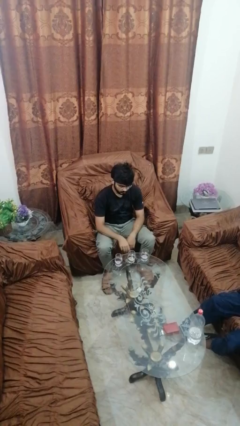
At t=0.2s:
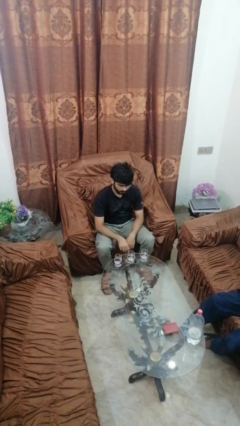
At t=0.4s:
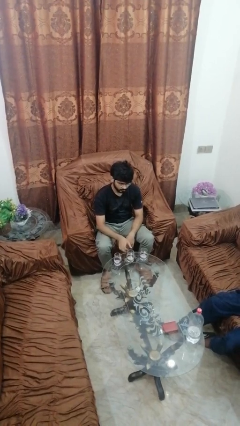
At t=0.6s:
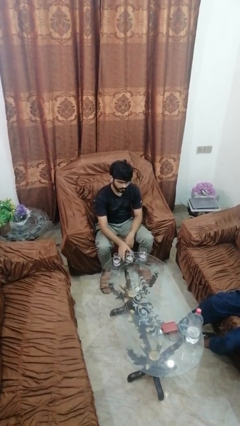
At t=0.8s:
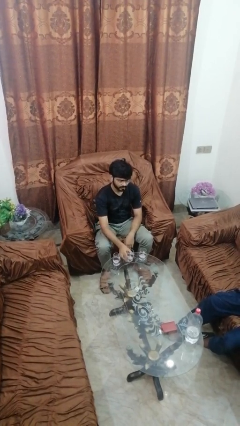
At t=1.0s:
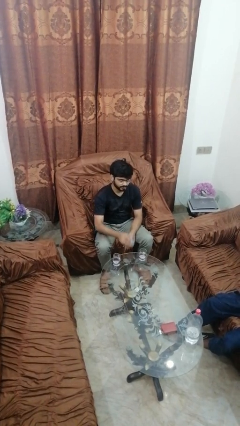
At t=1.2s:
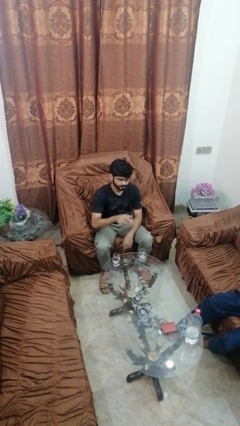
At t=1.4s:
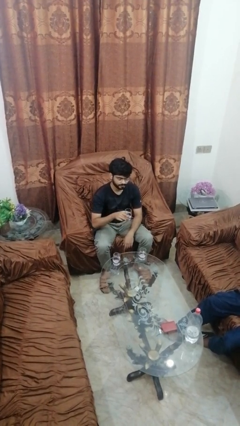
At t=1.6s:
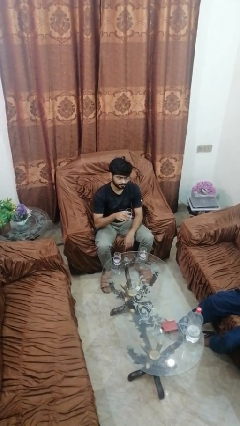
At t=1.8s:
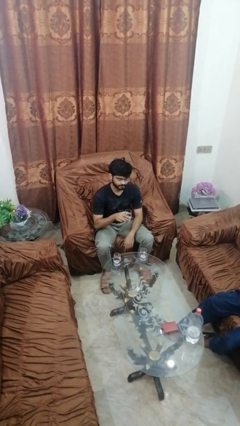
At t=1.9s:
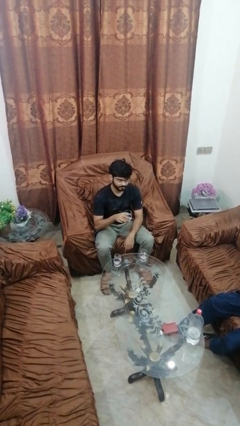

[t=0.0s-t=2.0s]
person picks up object from table

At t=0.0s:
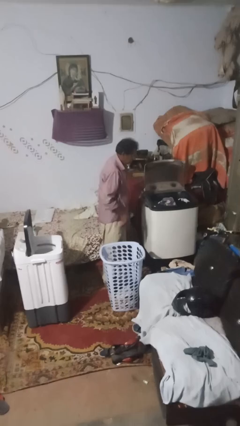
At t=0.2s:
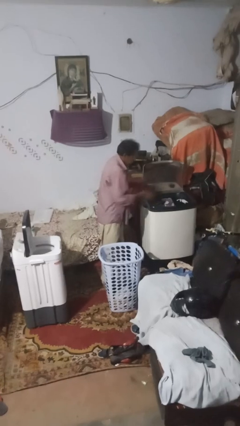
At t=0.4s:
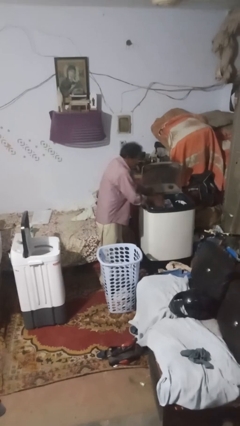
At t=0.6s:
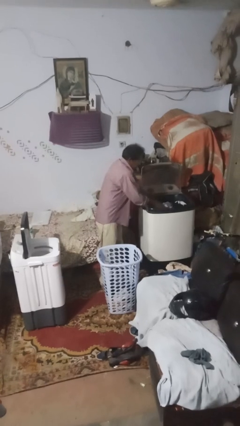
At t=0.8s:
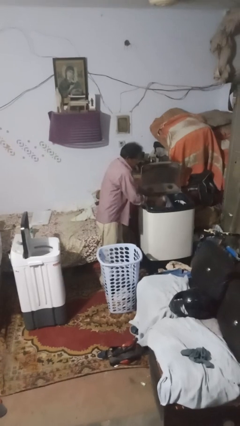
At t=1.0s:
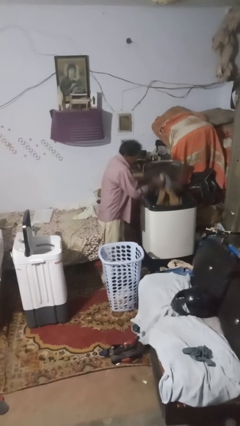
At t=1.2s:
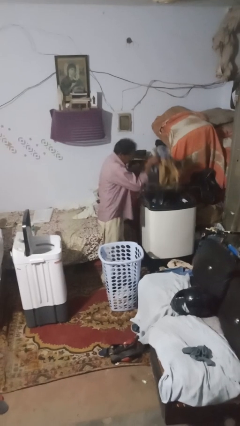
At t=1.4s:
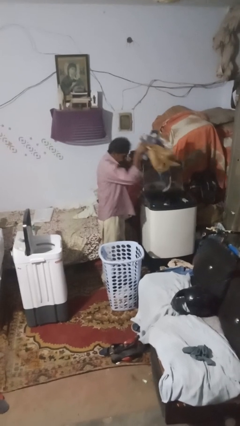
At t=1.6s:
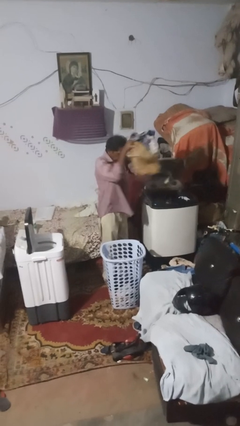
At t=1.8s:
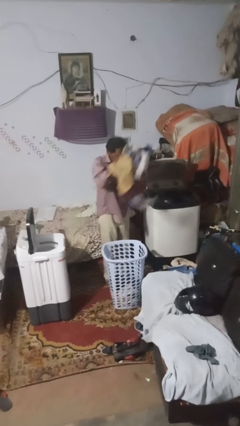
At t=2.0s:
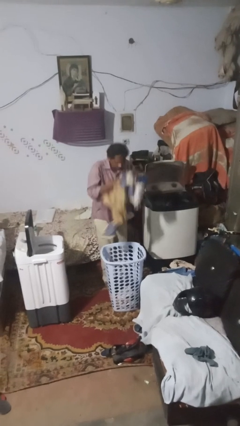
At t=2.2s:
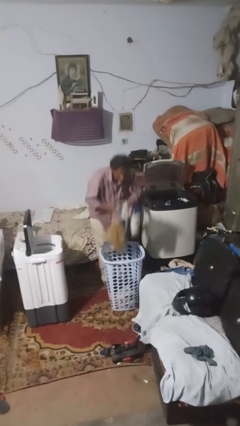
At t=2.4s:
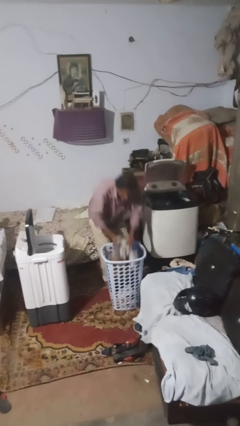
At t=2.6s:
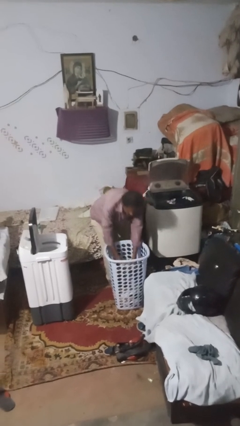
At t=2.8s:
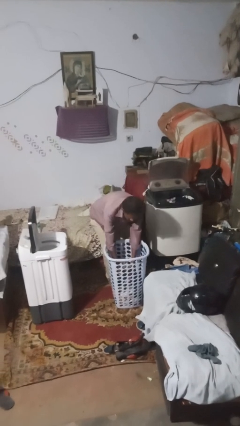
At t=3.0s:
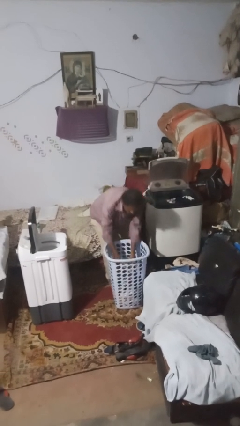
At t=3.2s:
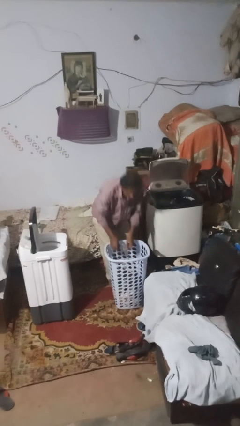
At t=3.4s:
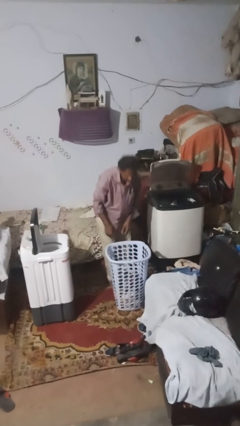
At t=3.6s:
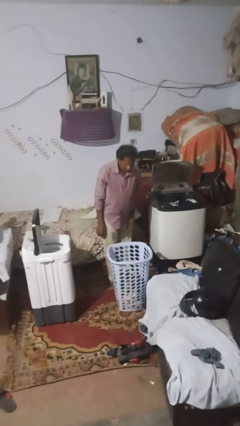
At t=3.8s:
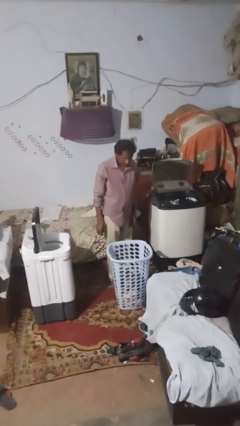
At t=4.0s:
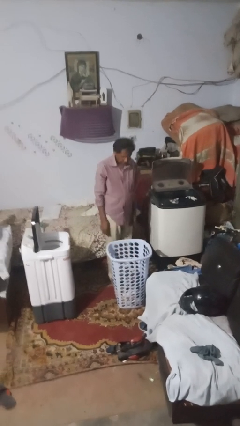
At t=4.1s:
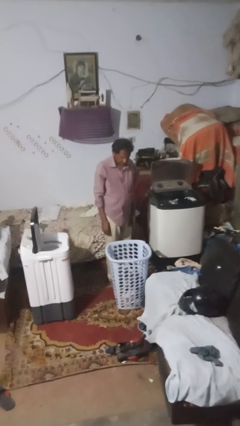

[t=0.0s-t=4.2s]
person unloads clotheswasher

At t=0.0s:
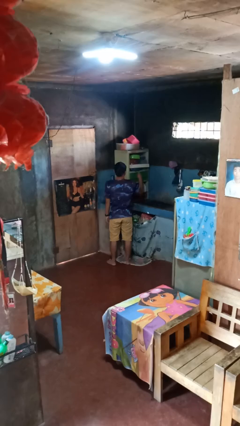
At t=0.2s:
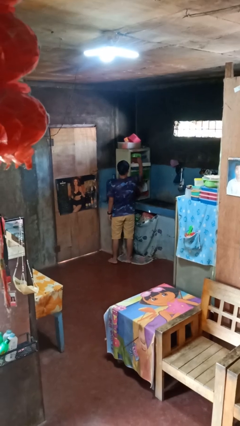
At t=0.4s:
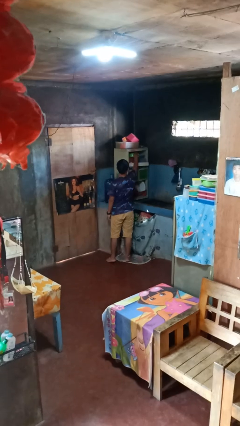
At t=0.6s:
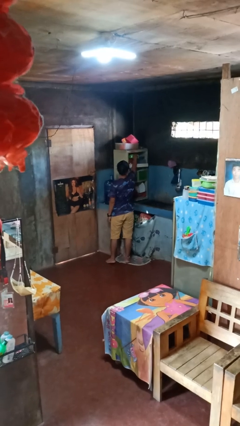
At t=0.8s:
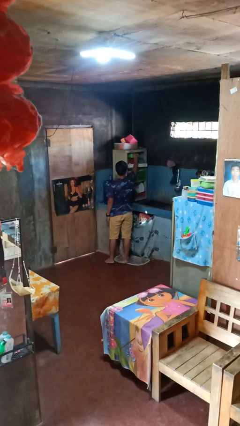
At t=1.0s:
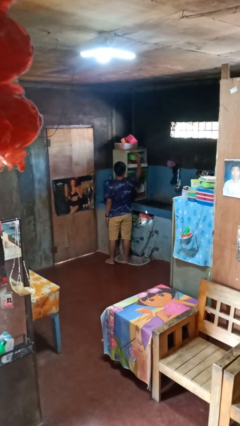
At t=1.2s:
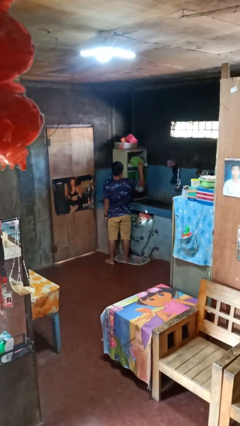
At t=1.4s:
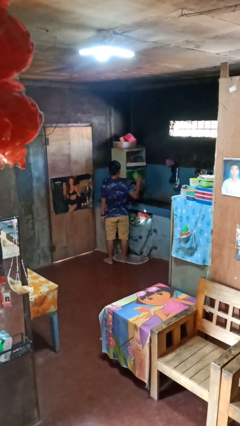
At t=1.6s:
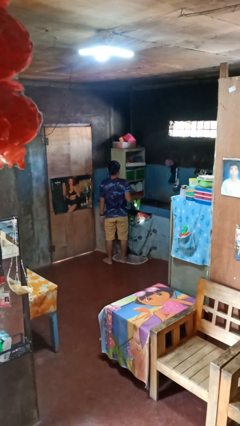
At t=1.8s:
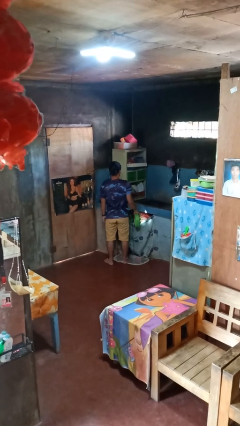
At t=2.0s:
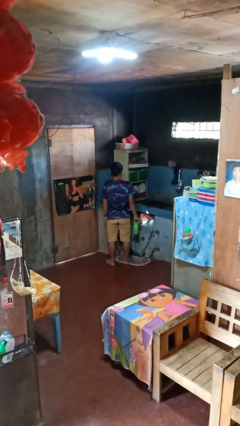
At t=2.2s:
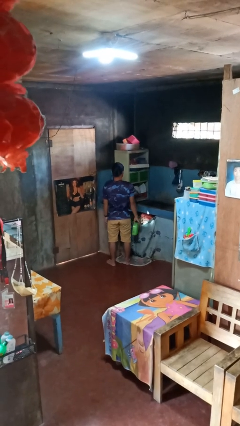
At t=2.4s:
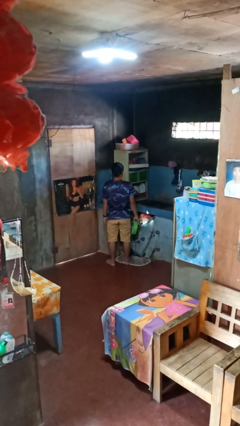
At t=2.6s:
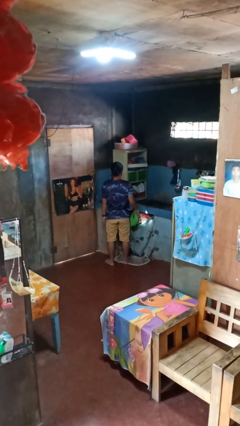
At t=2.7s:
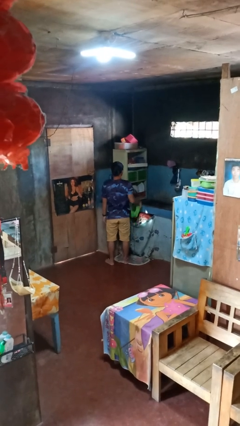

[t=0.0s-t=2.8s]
person takes object from cabinet

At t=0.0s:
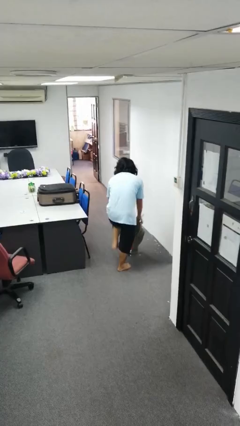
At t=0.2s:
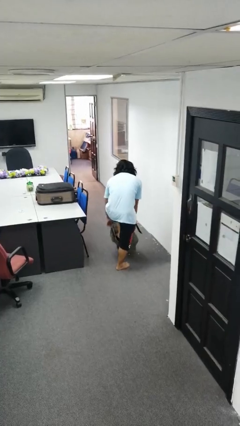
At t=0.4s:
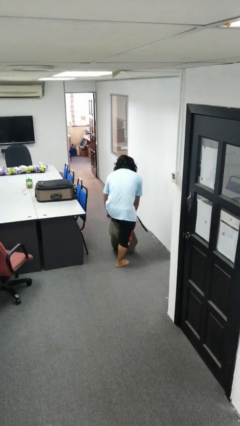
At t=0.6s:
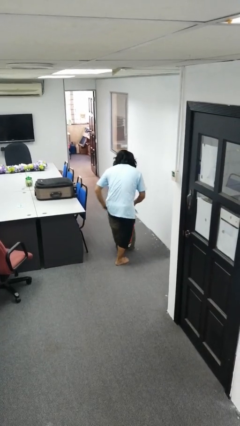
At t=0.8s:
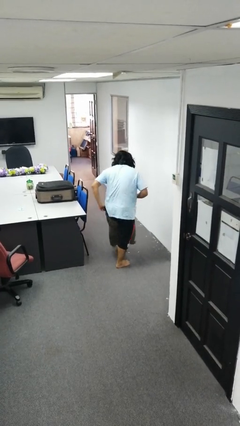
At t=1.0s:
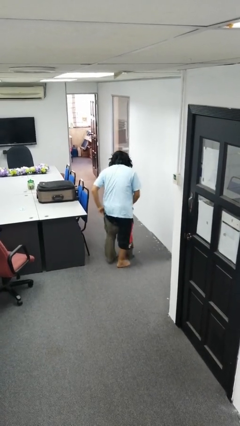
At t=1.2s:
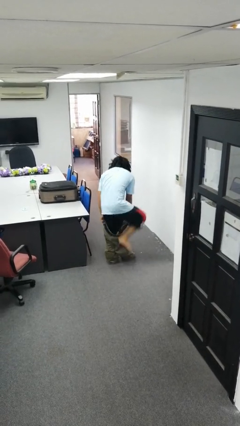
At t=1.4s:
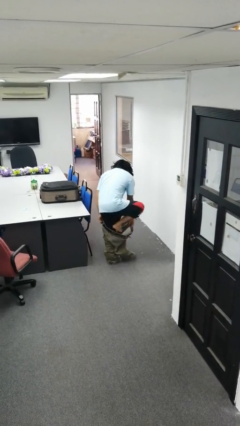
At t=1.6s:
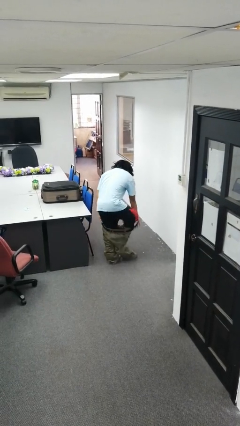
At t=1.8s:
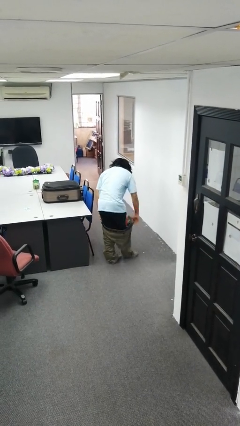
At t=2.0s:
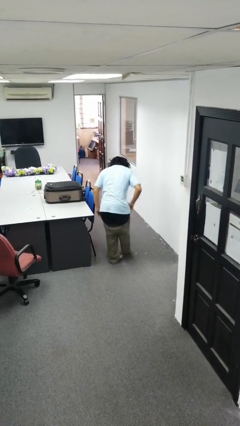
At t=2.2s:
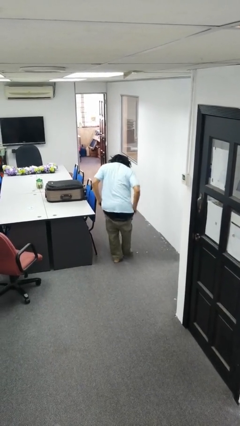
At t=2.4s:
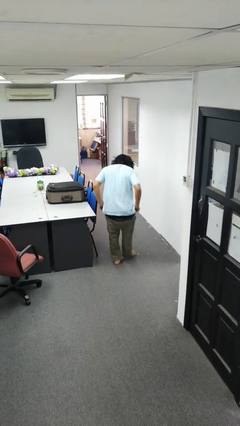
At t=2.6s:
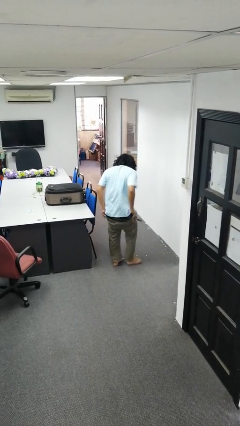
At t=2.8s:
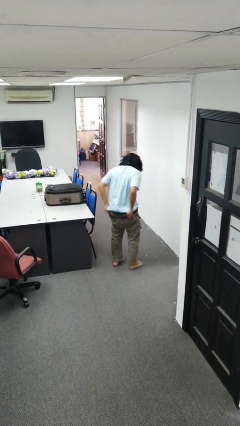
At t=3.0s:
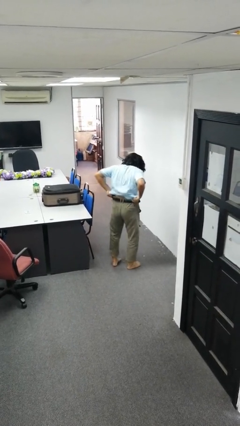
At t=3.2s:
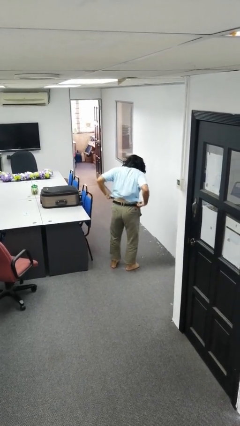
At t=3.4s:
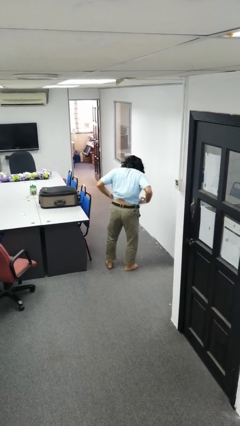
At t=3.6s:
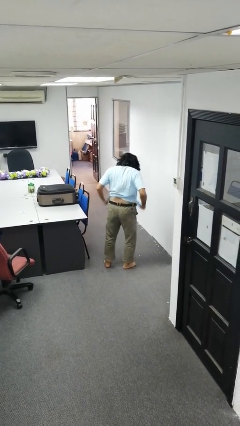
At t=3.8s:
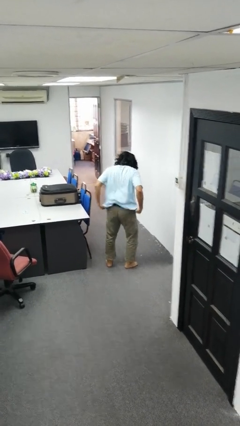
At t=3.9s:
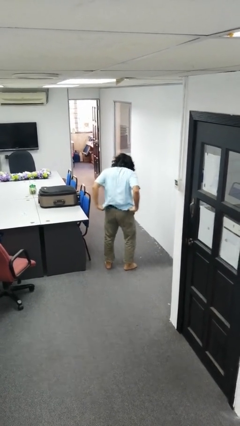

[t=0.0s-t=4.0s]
person takes off pants

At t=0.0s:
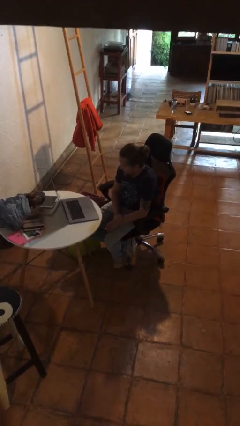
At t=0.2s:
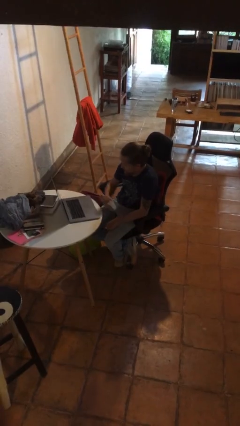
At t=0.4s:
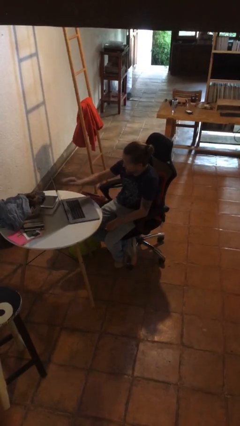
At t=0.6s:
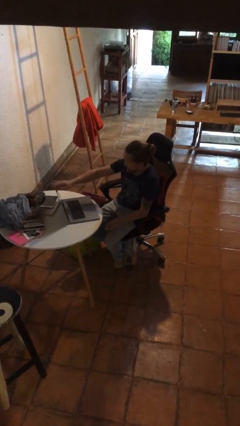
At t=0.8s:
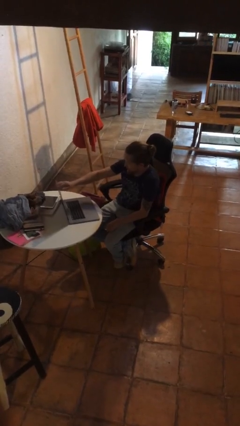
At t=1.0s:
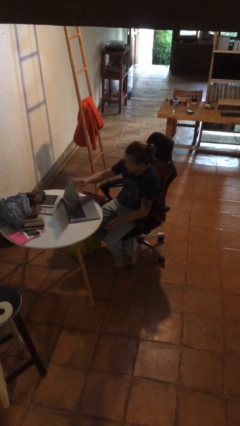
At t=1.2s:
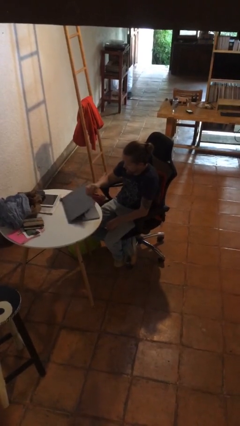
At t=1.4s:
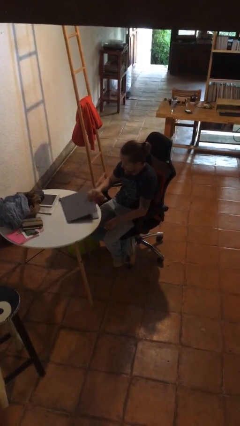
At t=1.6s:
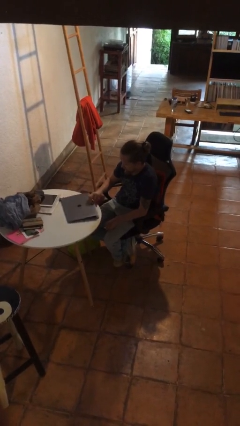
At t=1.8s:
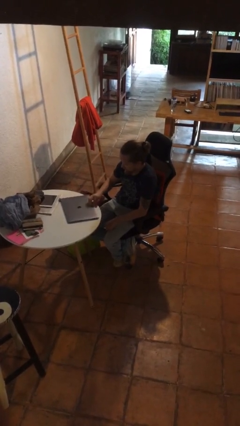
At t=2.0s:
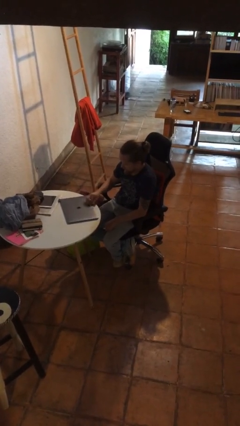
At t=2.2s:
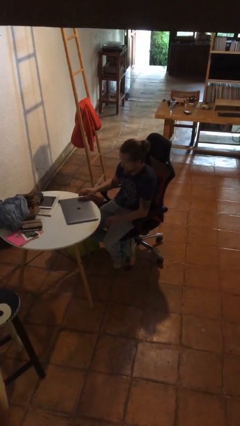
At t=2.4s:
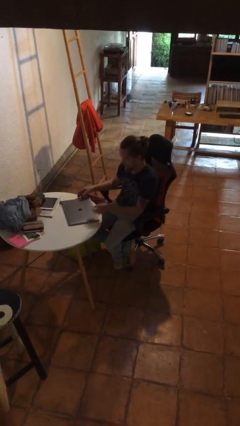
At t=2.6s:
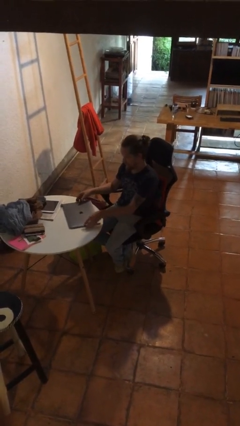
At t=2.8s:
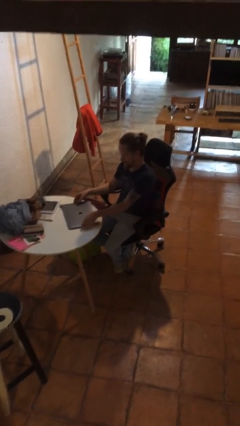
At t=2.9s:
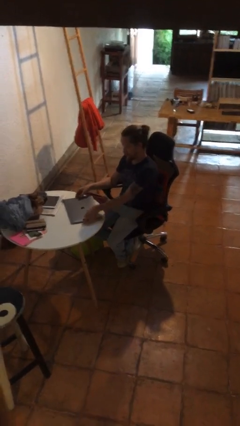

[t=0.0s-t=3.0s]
person closes laptop

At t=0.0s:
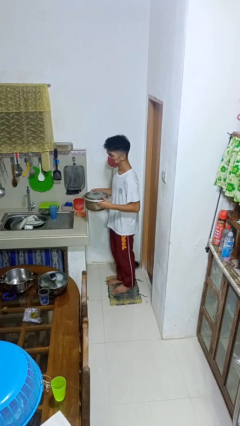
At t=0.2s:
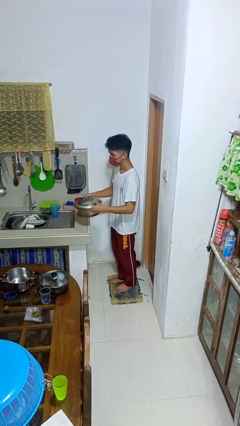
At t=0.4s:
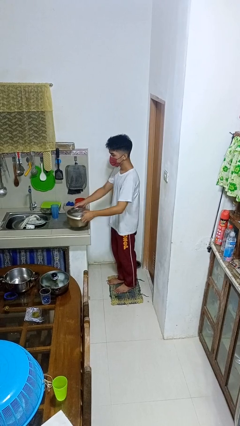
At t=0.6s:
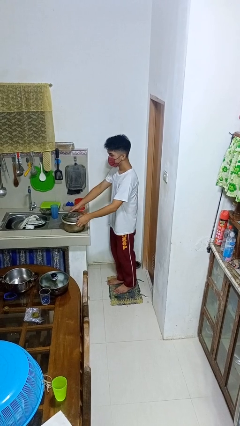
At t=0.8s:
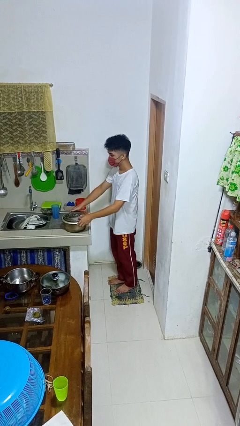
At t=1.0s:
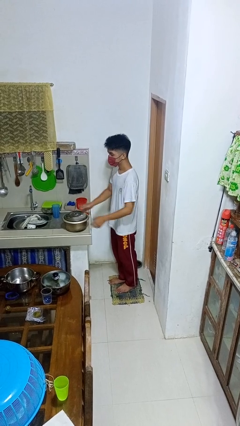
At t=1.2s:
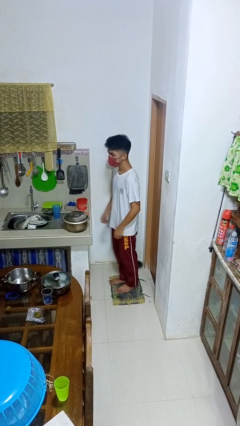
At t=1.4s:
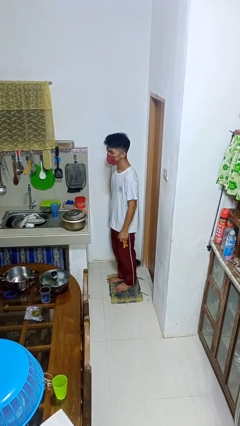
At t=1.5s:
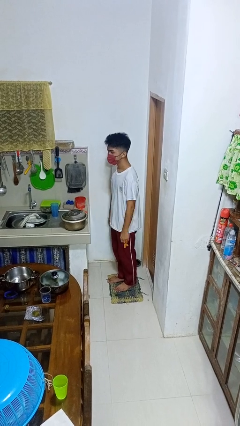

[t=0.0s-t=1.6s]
person puts down object on countertop
